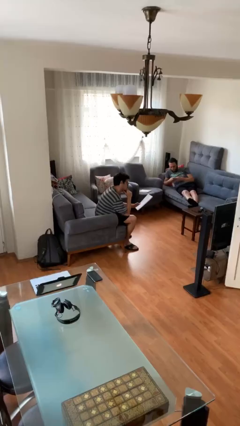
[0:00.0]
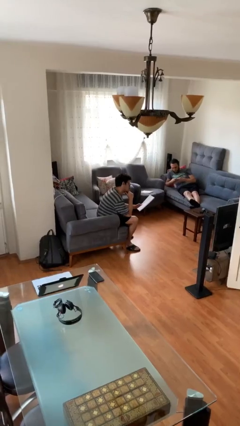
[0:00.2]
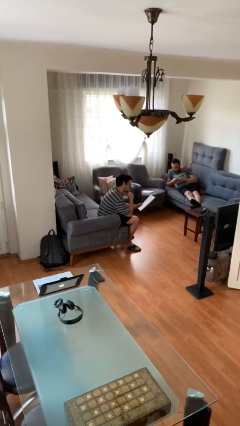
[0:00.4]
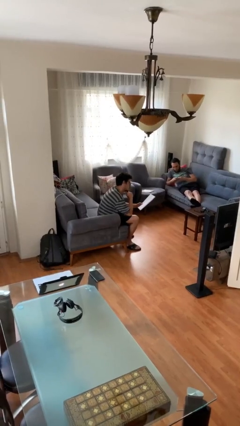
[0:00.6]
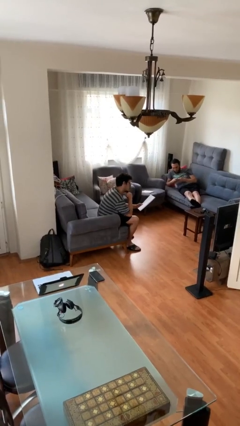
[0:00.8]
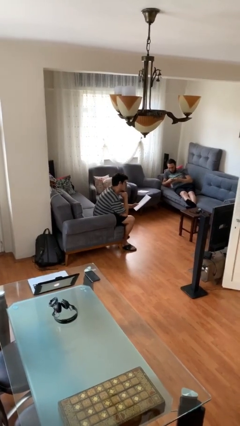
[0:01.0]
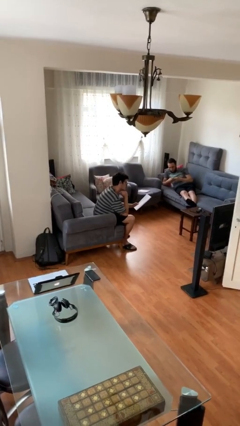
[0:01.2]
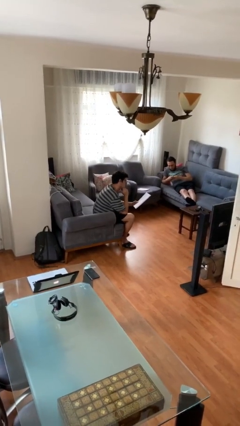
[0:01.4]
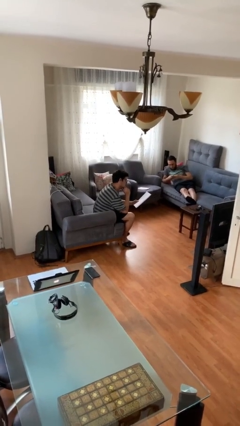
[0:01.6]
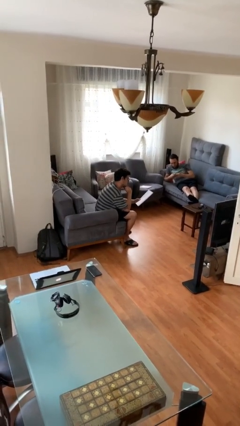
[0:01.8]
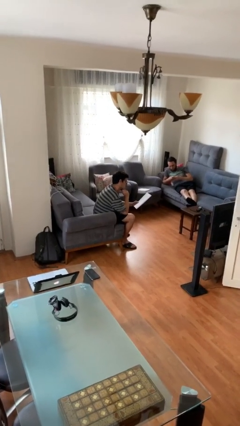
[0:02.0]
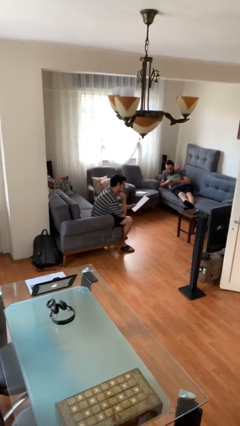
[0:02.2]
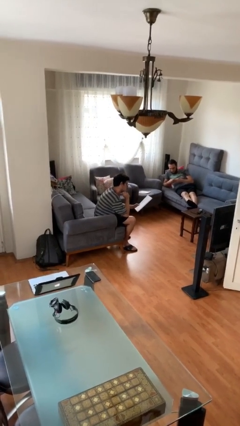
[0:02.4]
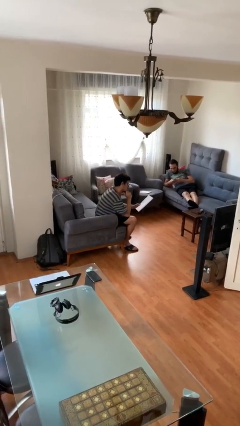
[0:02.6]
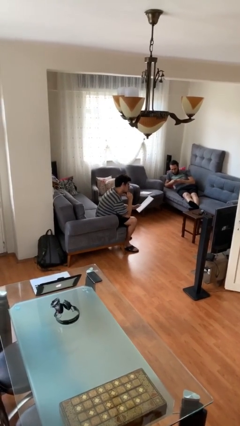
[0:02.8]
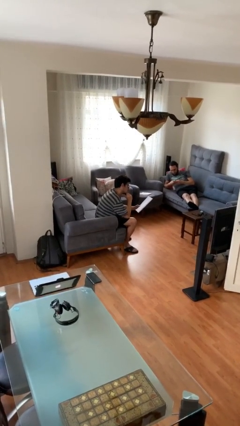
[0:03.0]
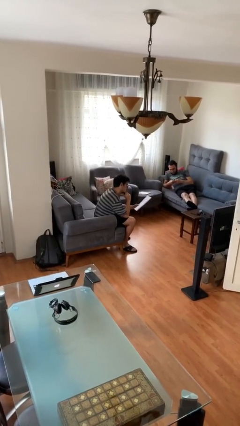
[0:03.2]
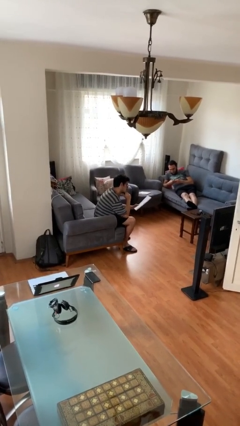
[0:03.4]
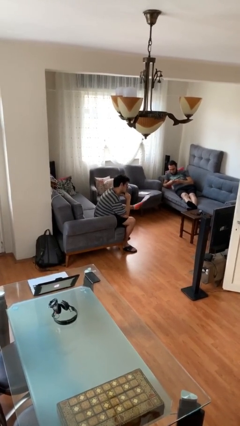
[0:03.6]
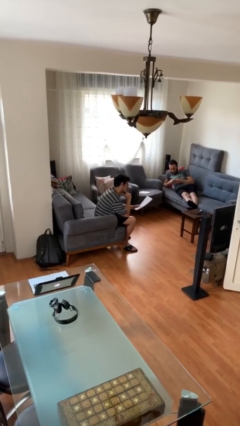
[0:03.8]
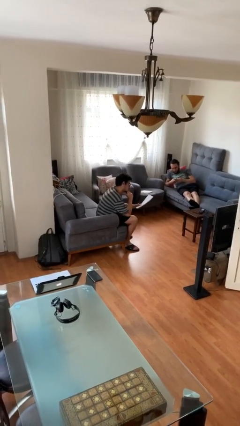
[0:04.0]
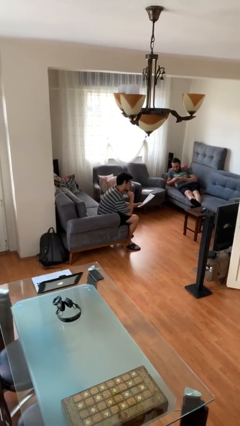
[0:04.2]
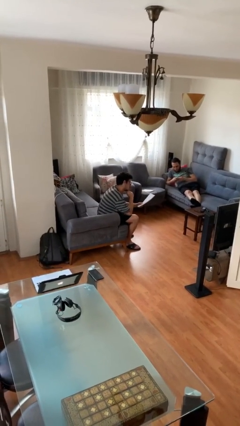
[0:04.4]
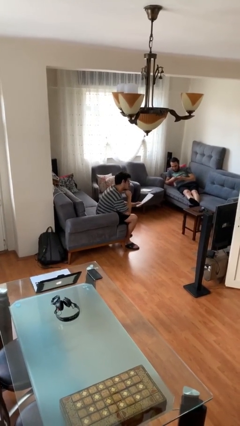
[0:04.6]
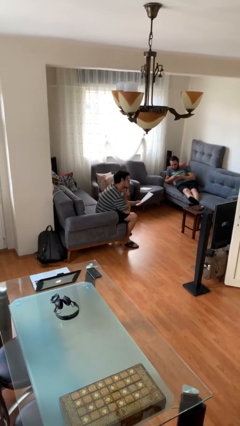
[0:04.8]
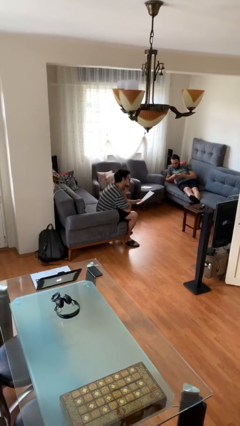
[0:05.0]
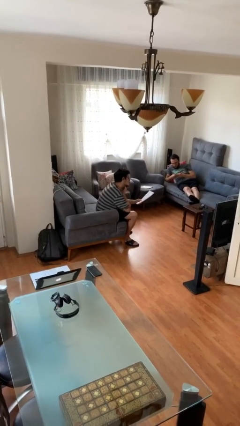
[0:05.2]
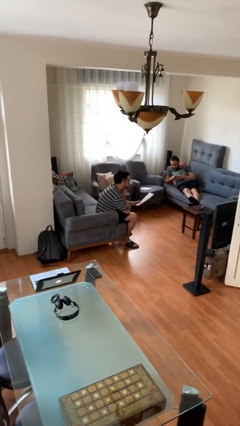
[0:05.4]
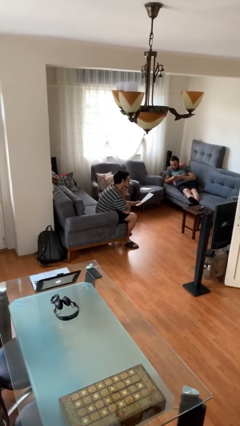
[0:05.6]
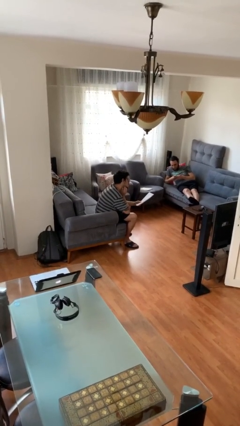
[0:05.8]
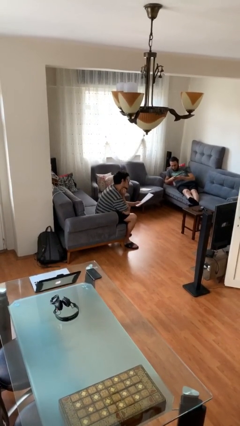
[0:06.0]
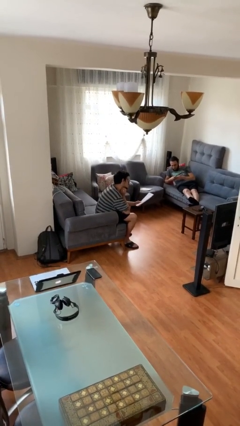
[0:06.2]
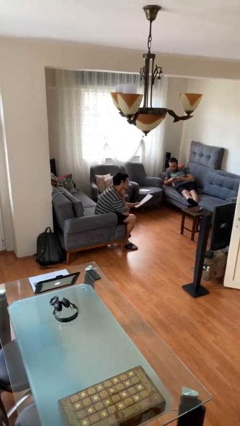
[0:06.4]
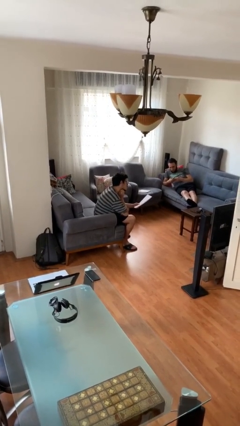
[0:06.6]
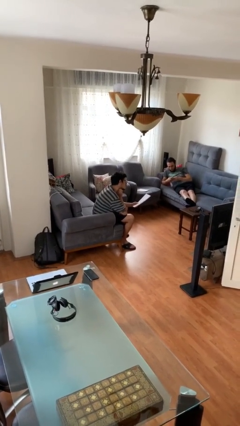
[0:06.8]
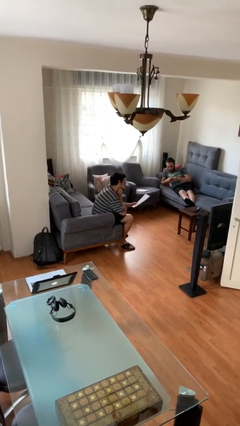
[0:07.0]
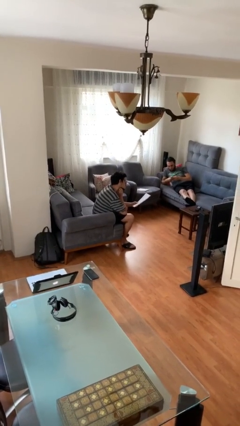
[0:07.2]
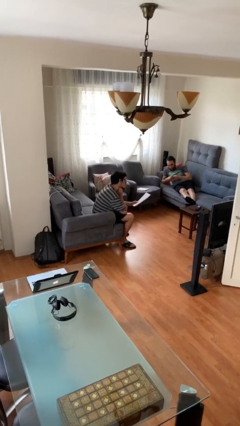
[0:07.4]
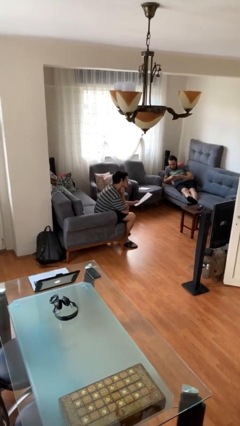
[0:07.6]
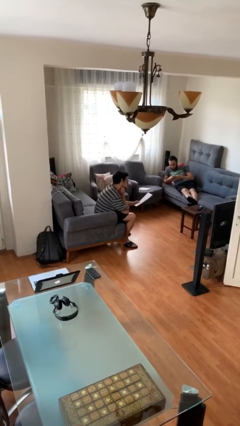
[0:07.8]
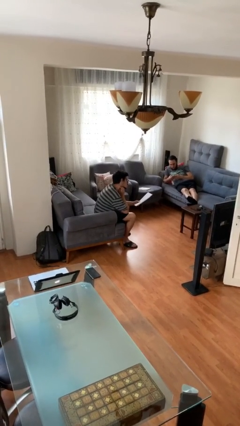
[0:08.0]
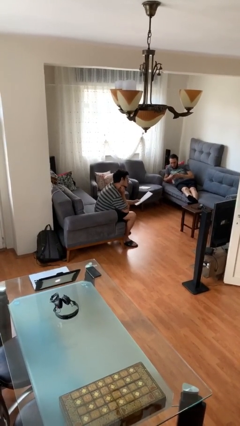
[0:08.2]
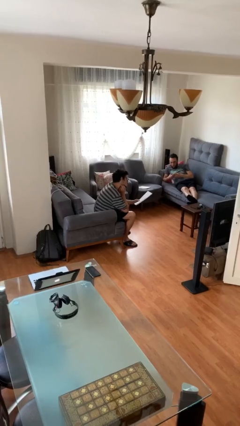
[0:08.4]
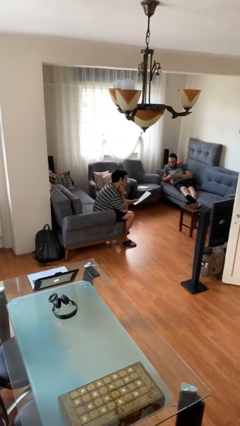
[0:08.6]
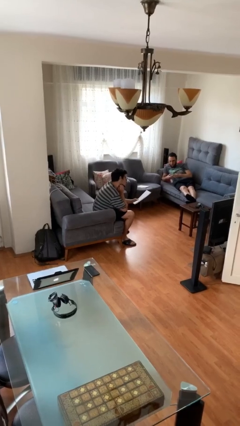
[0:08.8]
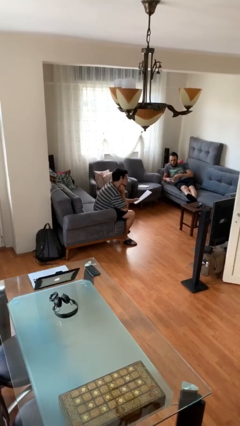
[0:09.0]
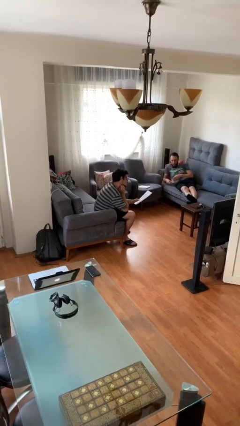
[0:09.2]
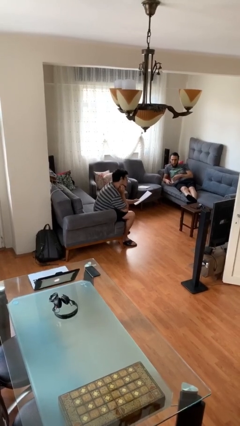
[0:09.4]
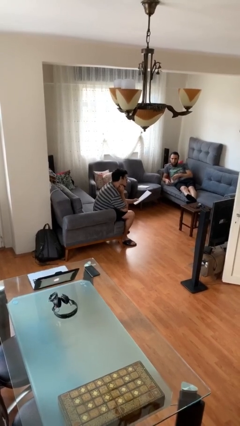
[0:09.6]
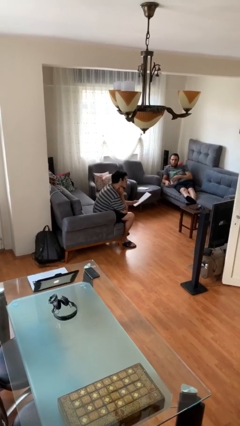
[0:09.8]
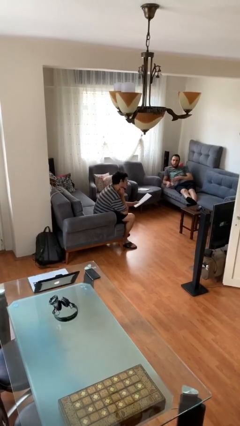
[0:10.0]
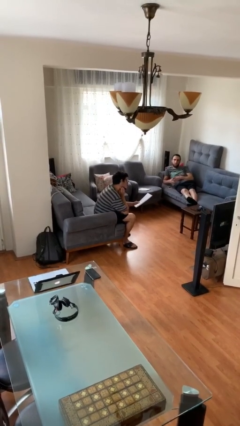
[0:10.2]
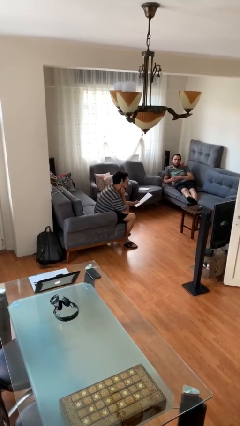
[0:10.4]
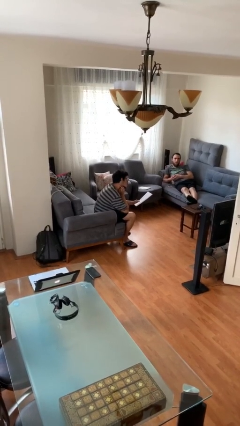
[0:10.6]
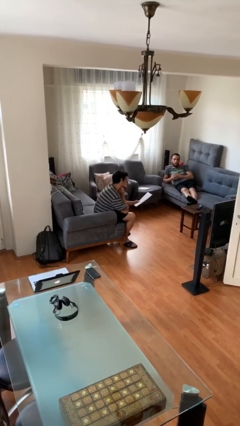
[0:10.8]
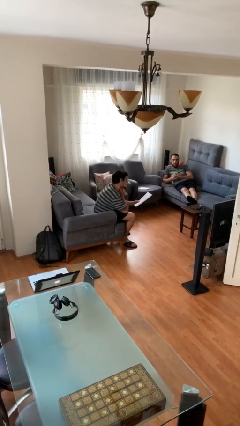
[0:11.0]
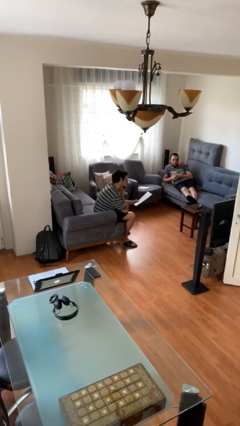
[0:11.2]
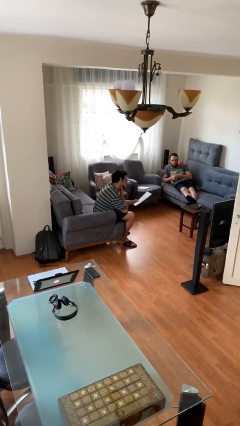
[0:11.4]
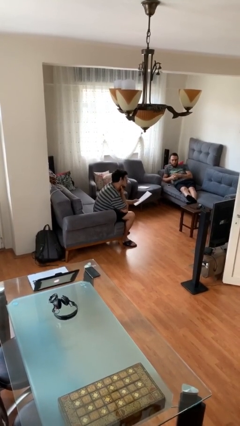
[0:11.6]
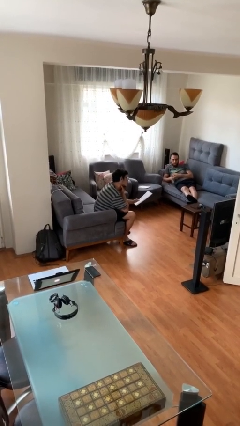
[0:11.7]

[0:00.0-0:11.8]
person reads document

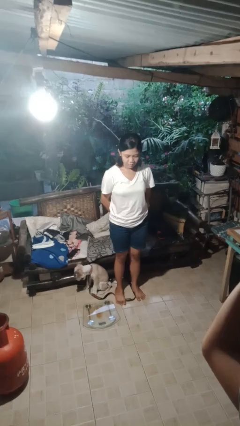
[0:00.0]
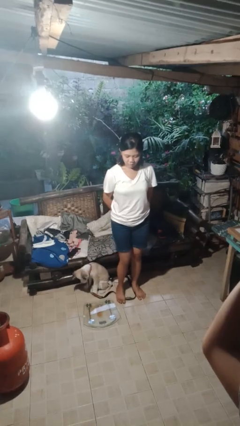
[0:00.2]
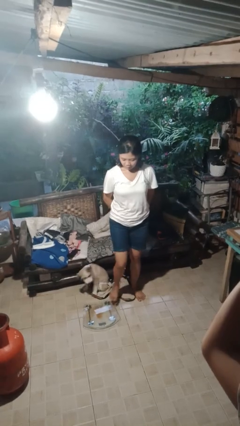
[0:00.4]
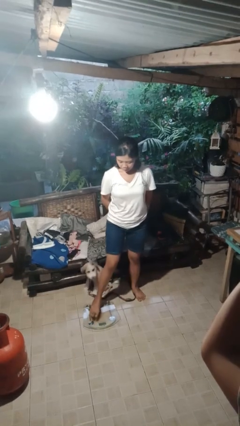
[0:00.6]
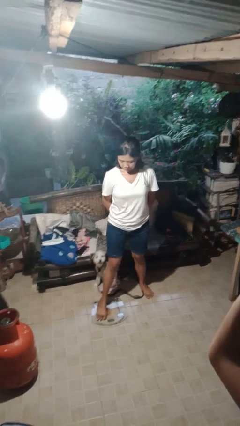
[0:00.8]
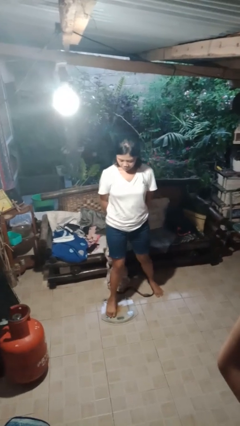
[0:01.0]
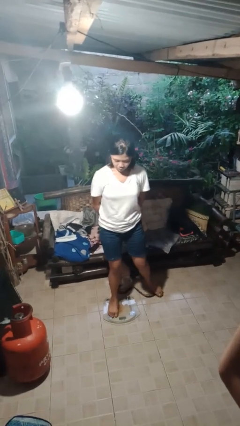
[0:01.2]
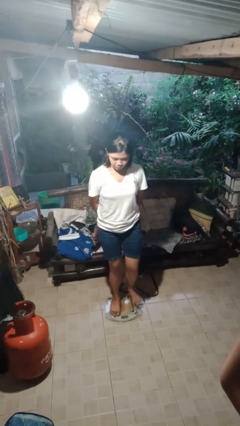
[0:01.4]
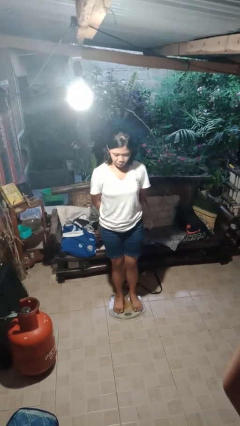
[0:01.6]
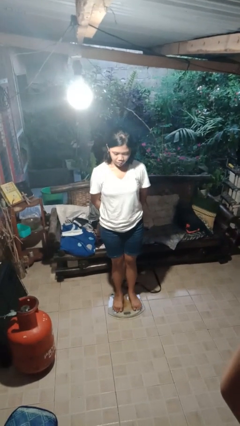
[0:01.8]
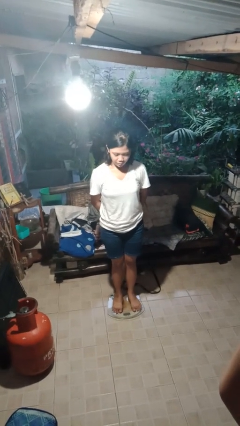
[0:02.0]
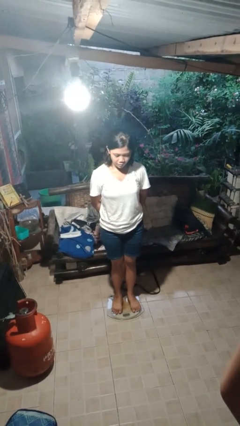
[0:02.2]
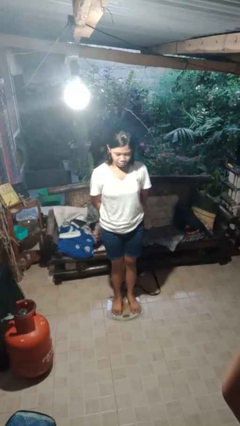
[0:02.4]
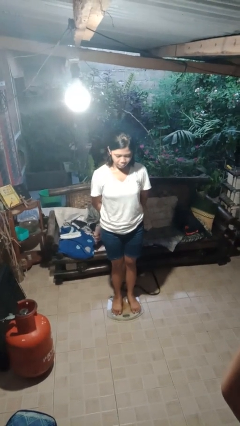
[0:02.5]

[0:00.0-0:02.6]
person uses bodyweight scale

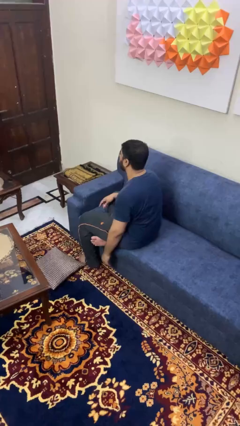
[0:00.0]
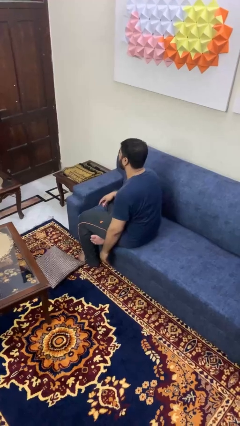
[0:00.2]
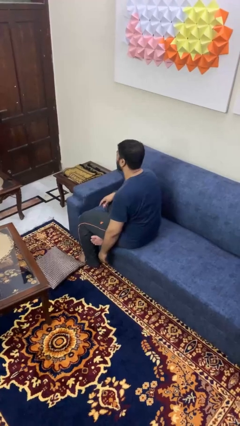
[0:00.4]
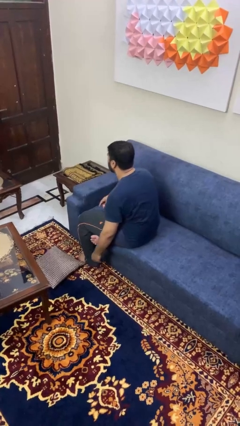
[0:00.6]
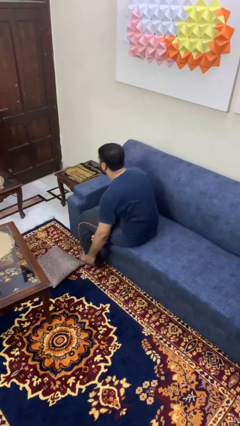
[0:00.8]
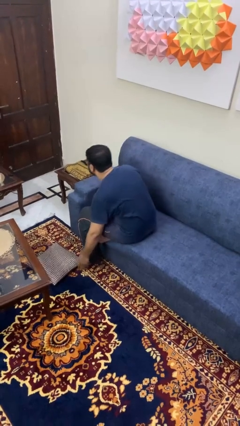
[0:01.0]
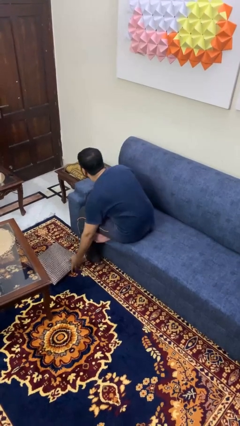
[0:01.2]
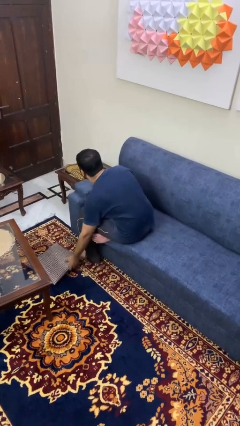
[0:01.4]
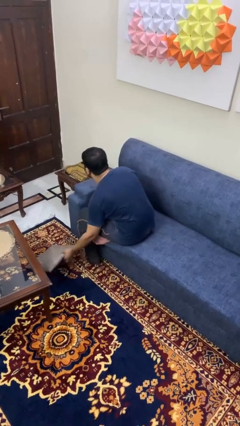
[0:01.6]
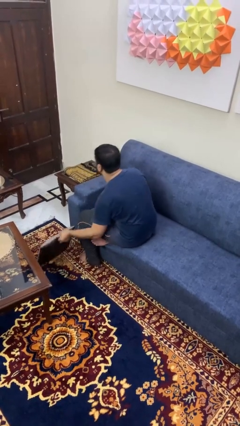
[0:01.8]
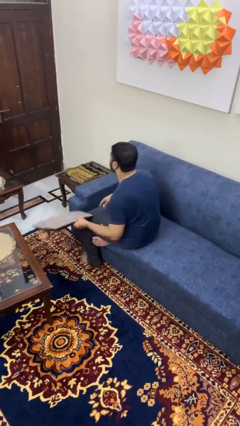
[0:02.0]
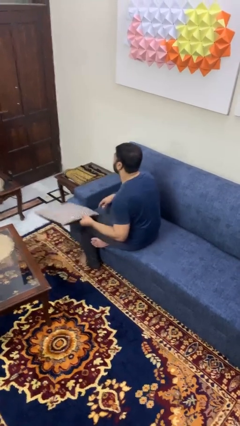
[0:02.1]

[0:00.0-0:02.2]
person picks up object from floor

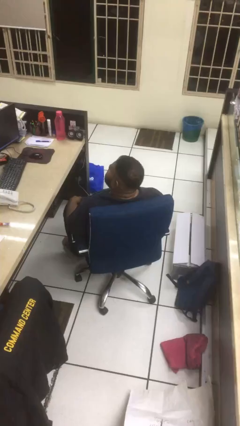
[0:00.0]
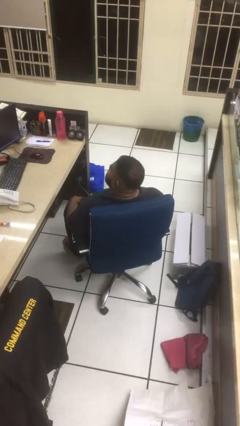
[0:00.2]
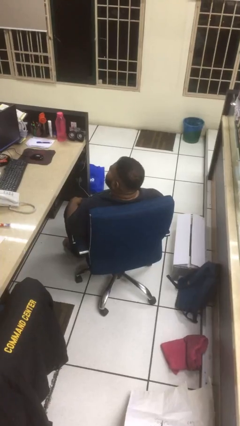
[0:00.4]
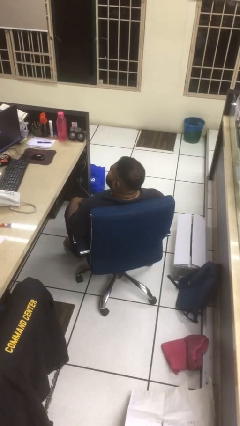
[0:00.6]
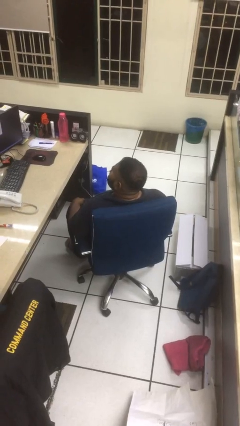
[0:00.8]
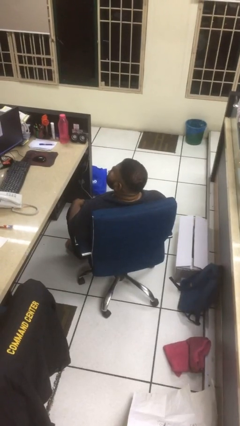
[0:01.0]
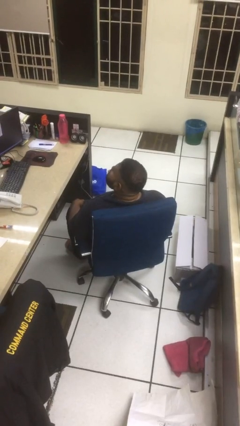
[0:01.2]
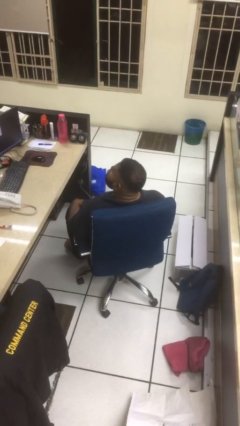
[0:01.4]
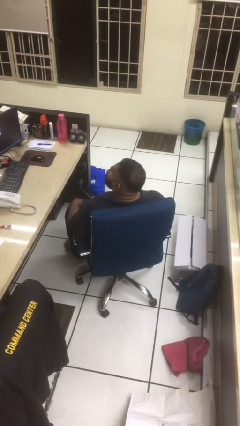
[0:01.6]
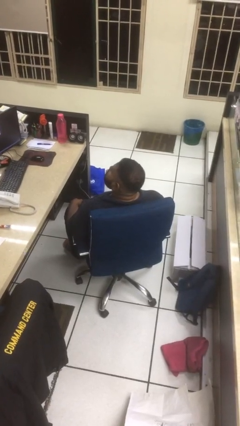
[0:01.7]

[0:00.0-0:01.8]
person sticks out tongue
